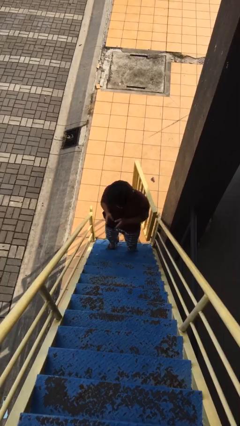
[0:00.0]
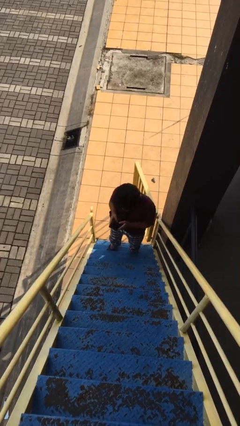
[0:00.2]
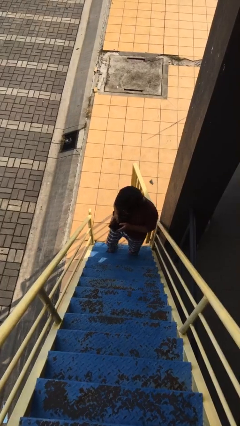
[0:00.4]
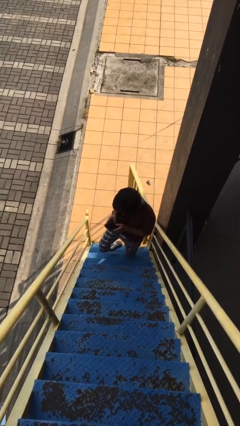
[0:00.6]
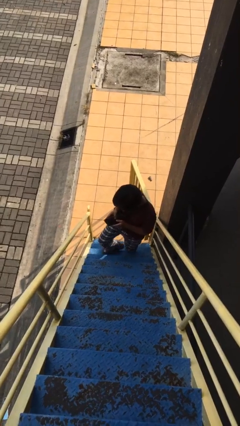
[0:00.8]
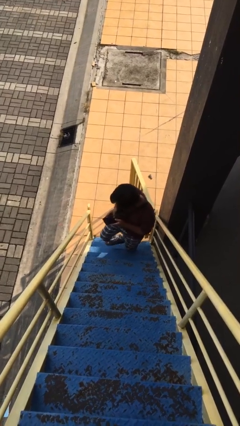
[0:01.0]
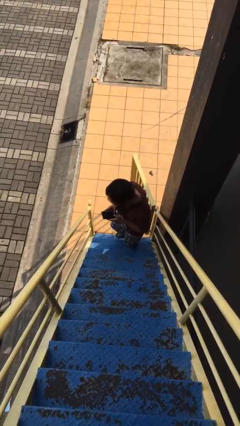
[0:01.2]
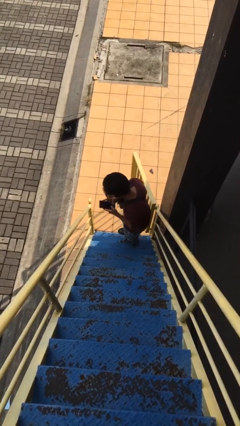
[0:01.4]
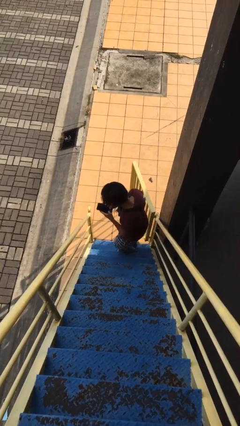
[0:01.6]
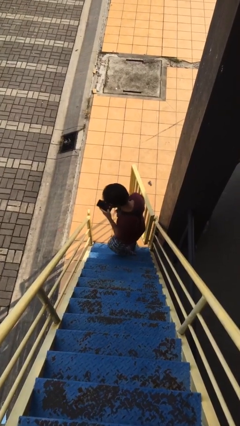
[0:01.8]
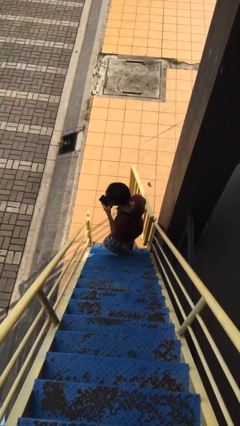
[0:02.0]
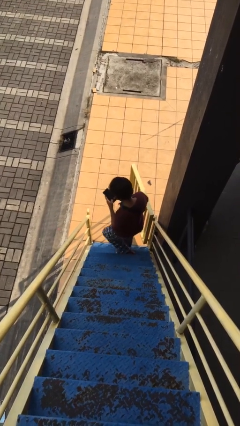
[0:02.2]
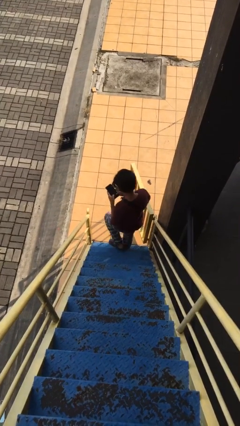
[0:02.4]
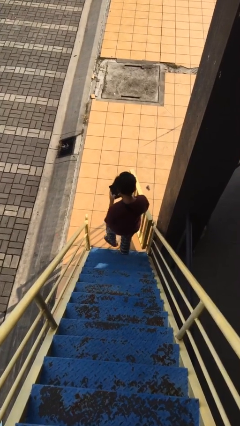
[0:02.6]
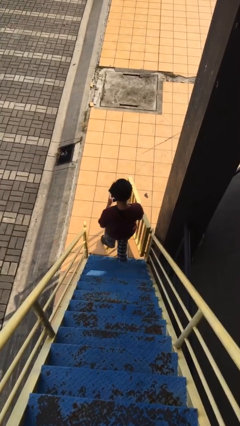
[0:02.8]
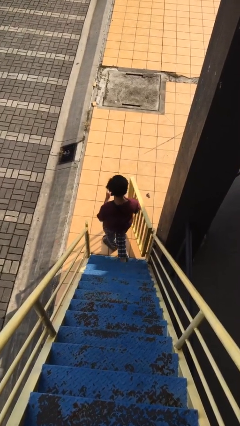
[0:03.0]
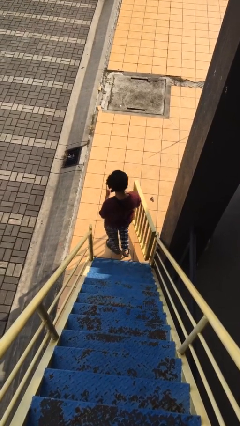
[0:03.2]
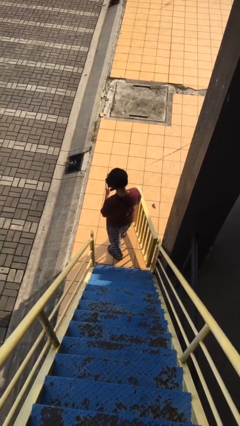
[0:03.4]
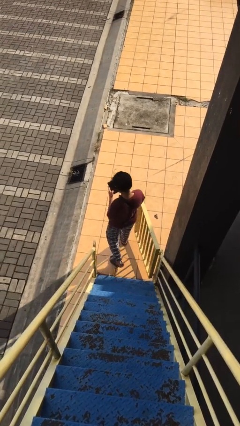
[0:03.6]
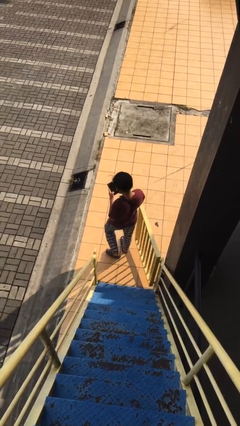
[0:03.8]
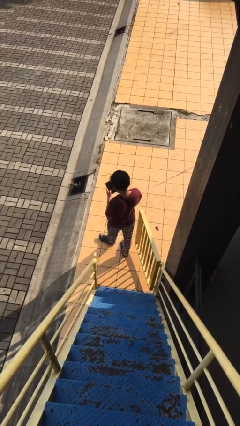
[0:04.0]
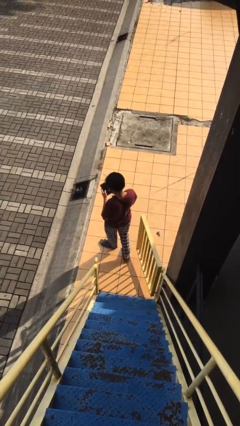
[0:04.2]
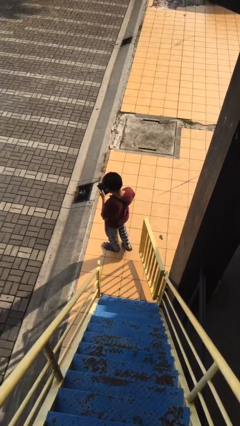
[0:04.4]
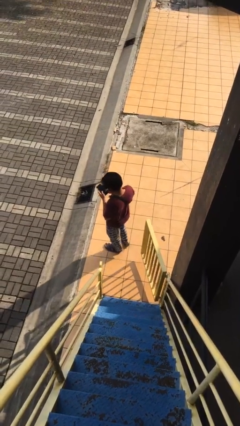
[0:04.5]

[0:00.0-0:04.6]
person exits scene through structure

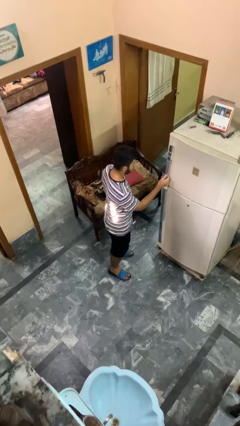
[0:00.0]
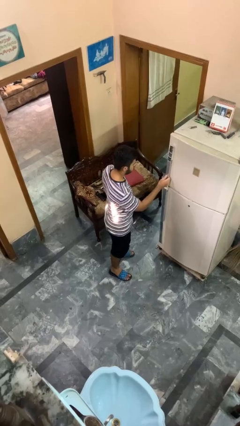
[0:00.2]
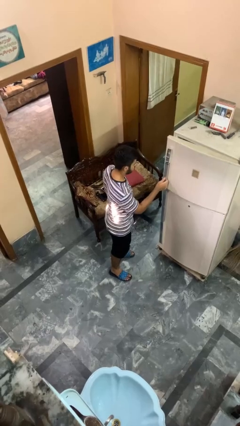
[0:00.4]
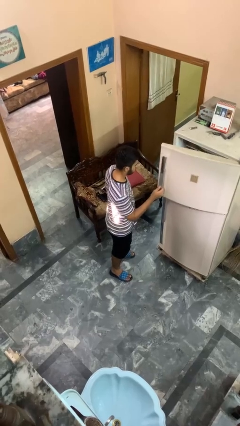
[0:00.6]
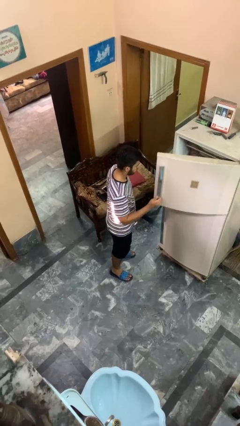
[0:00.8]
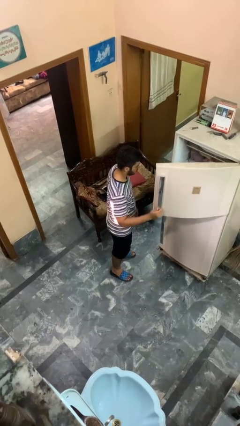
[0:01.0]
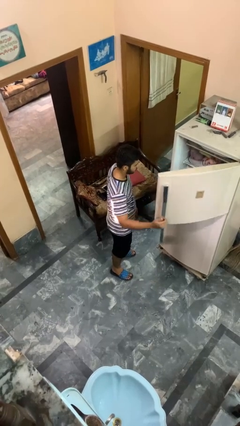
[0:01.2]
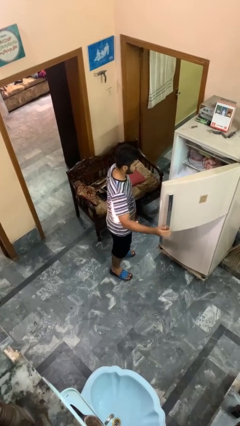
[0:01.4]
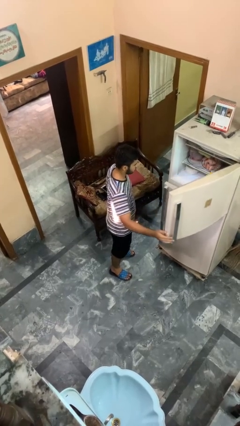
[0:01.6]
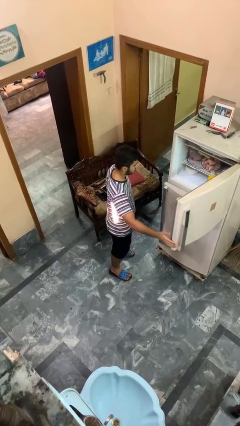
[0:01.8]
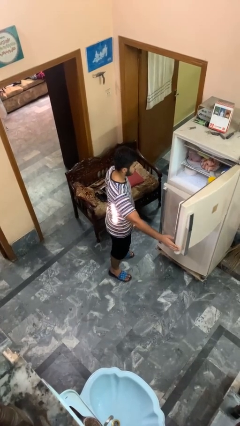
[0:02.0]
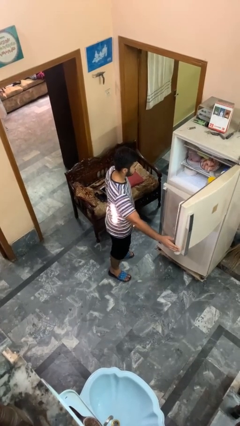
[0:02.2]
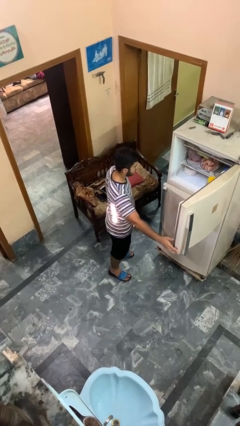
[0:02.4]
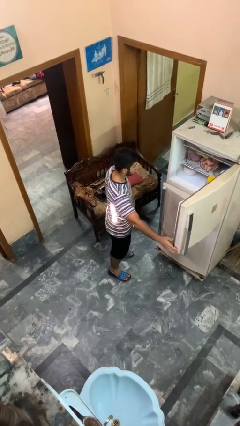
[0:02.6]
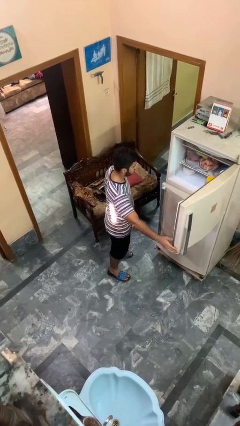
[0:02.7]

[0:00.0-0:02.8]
person opens refrigerator

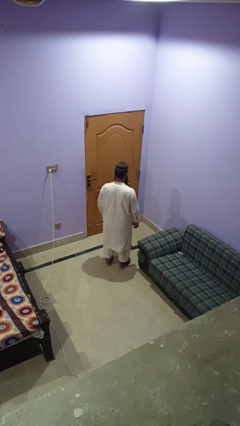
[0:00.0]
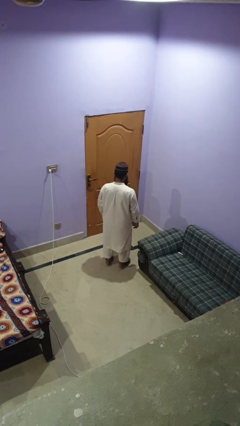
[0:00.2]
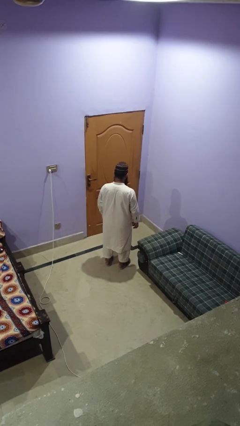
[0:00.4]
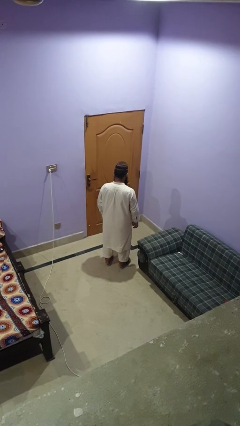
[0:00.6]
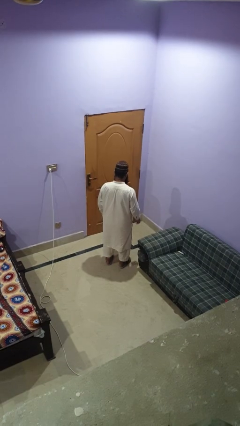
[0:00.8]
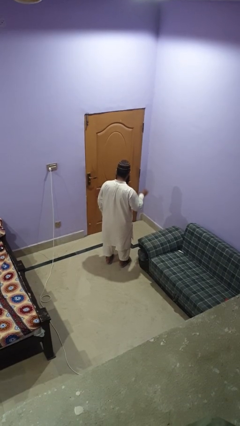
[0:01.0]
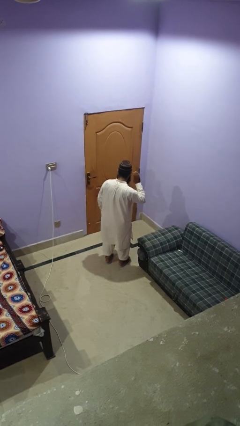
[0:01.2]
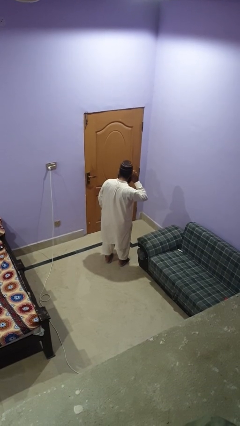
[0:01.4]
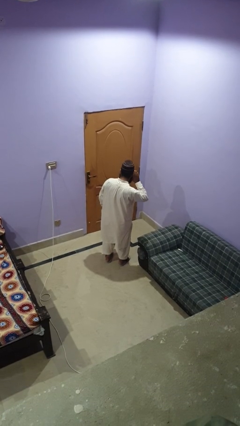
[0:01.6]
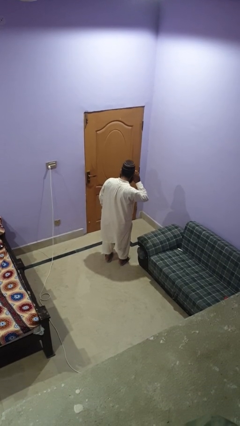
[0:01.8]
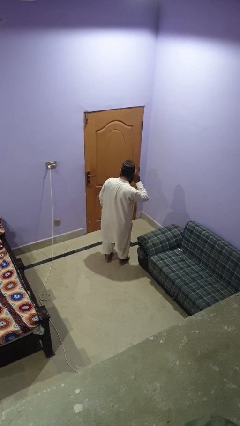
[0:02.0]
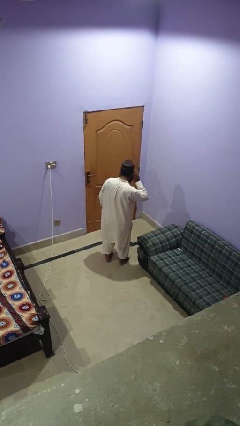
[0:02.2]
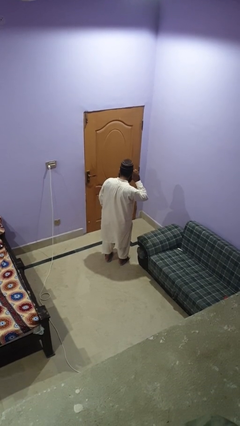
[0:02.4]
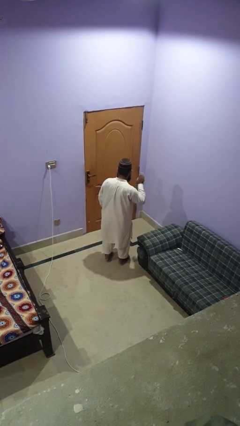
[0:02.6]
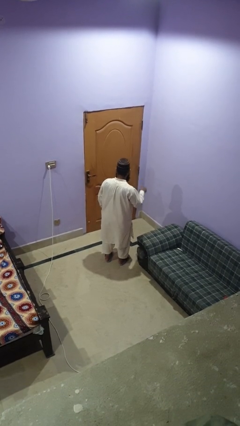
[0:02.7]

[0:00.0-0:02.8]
person gestures listen closely

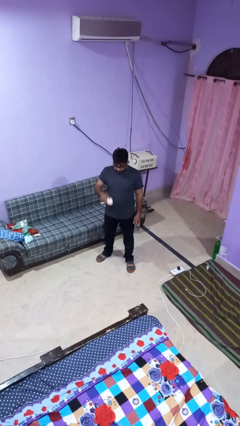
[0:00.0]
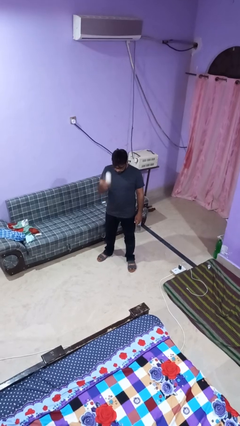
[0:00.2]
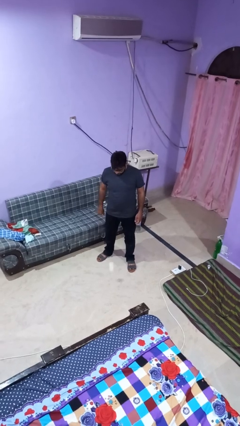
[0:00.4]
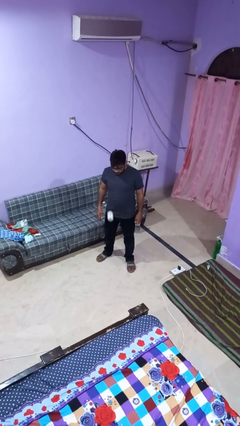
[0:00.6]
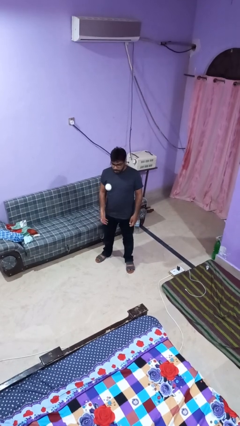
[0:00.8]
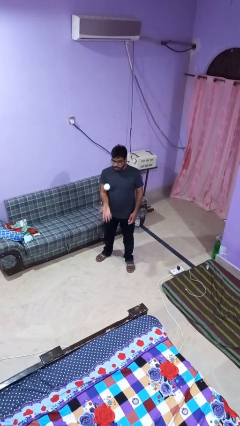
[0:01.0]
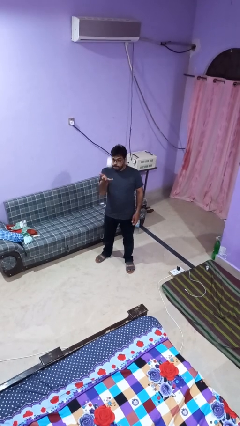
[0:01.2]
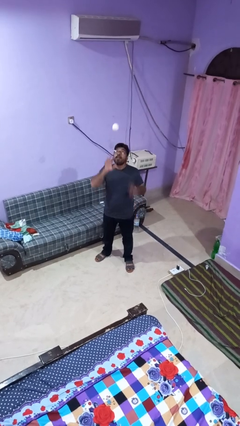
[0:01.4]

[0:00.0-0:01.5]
person bounces ball on floor

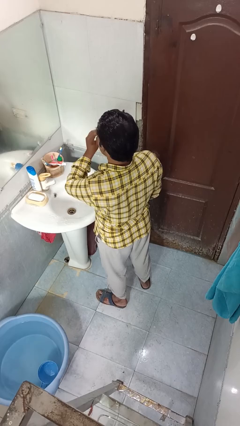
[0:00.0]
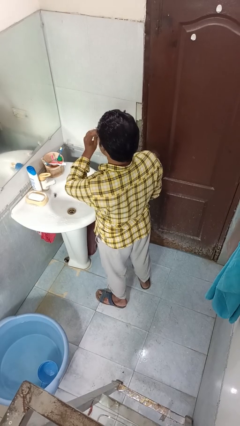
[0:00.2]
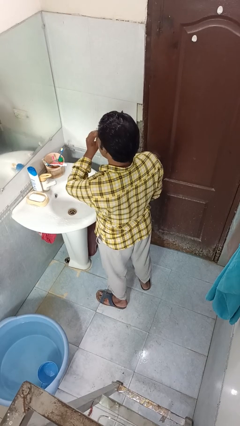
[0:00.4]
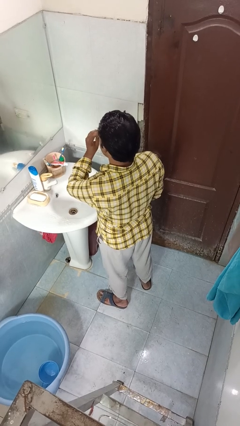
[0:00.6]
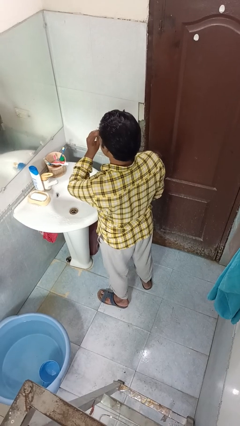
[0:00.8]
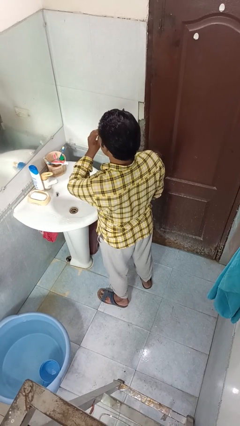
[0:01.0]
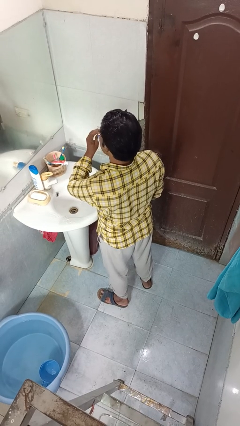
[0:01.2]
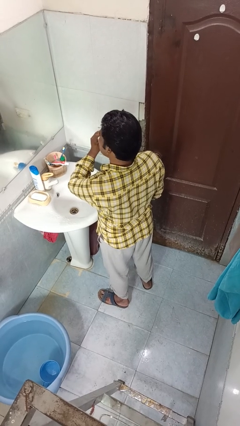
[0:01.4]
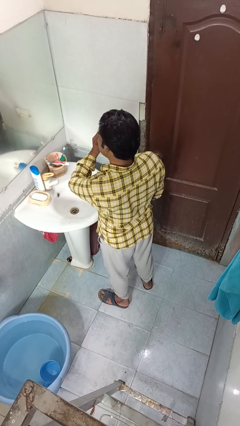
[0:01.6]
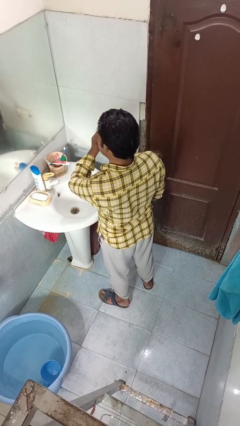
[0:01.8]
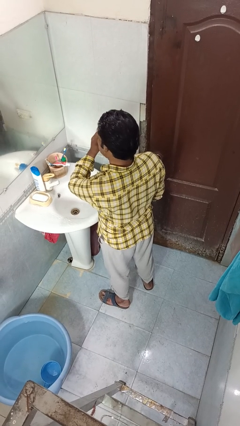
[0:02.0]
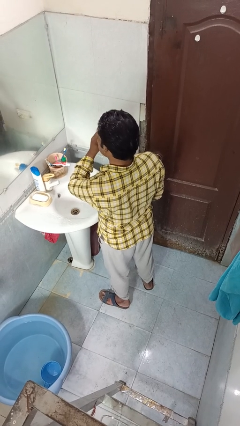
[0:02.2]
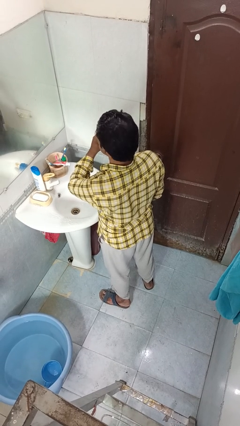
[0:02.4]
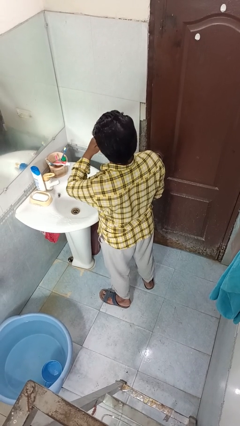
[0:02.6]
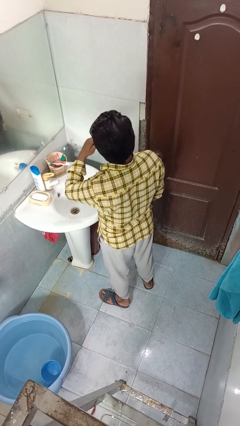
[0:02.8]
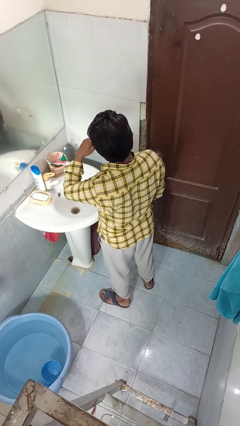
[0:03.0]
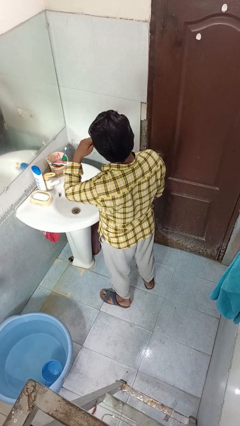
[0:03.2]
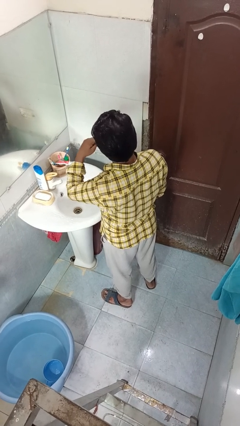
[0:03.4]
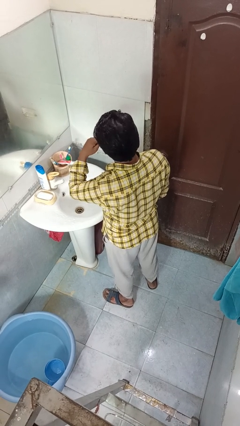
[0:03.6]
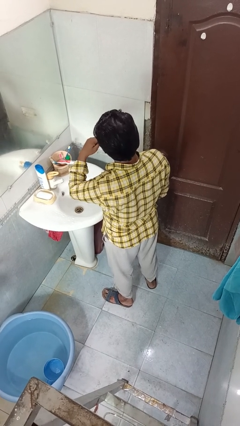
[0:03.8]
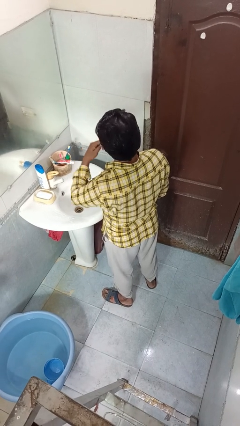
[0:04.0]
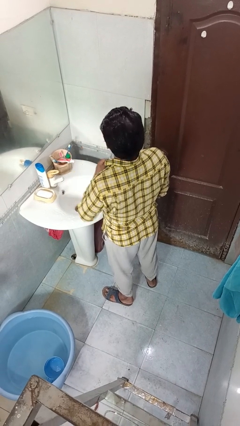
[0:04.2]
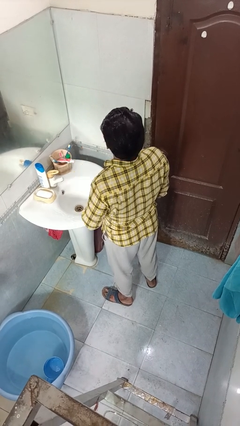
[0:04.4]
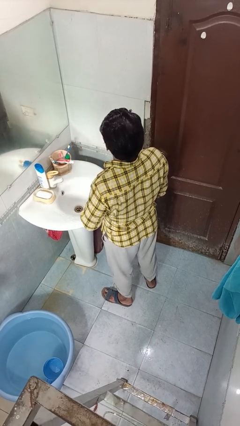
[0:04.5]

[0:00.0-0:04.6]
person brushes teeth

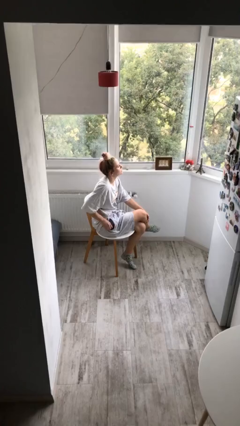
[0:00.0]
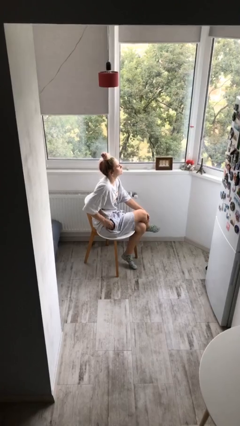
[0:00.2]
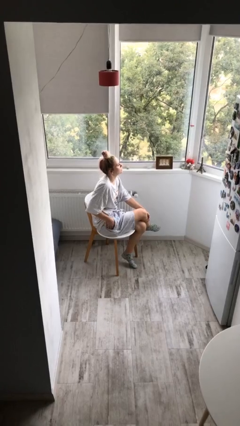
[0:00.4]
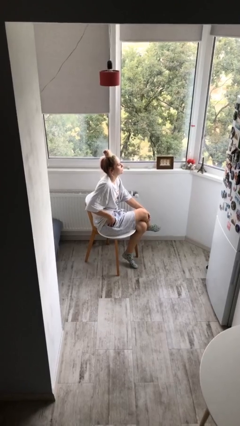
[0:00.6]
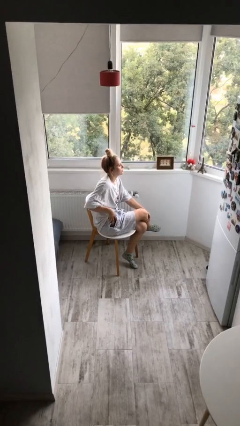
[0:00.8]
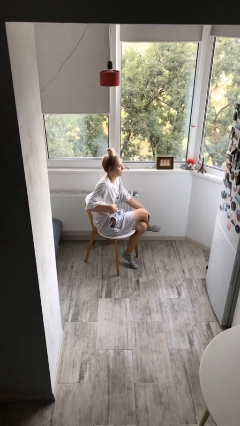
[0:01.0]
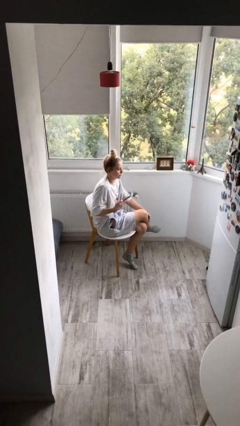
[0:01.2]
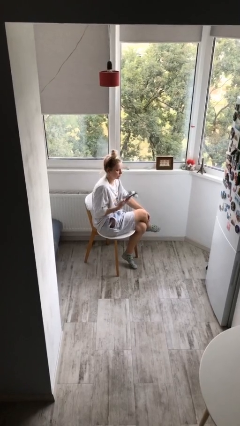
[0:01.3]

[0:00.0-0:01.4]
person takes phone from pocket
